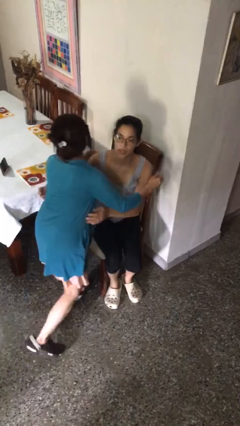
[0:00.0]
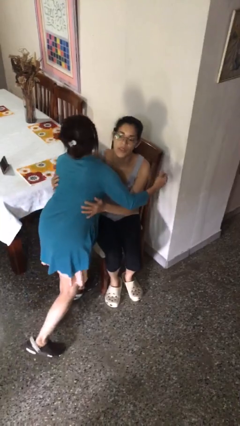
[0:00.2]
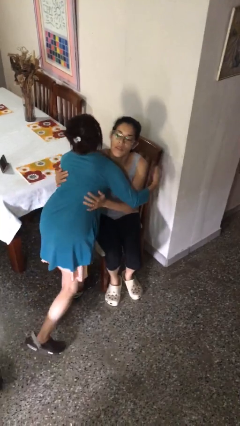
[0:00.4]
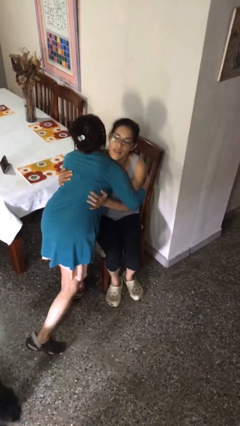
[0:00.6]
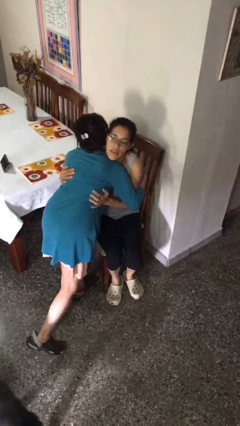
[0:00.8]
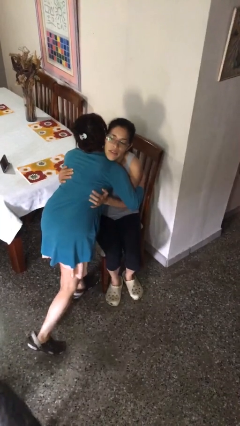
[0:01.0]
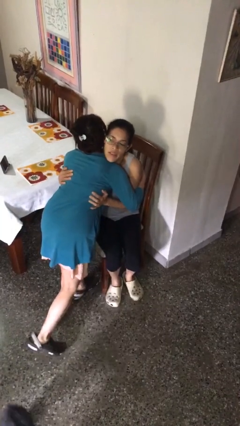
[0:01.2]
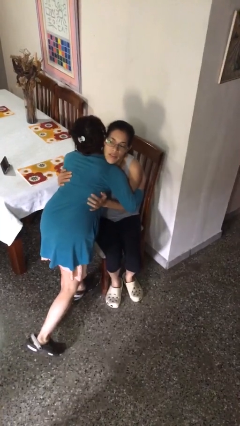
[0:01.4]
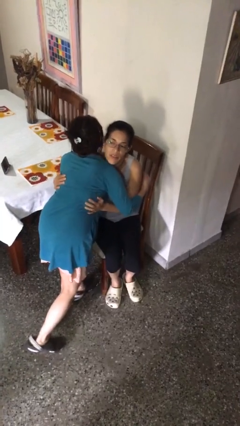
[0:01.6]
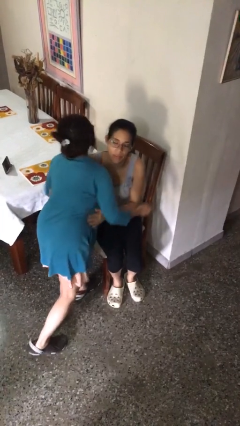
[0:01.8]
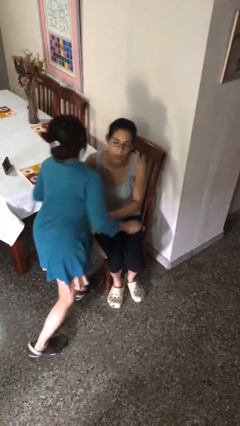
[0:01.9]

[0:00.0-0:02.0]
person embraces person

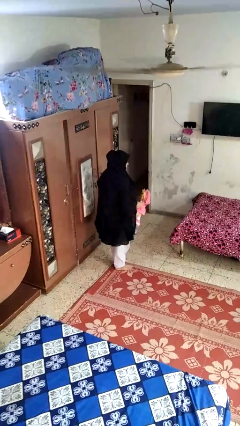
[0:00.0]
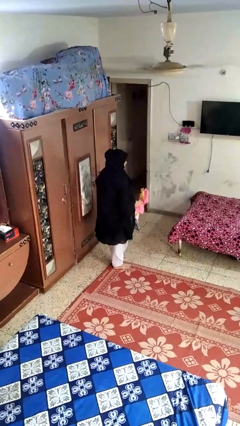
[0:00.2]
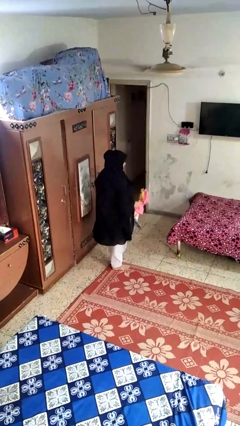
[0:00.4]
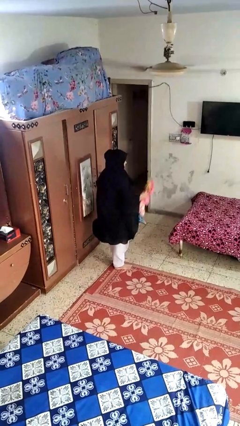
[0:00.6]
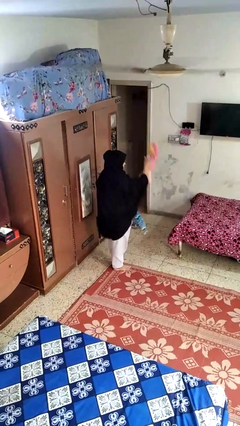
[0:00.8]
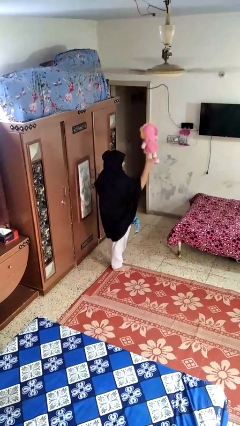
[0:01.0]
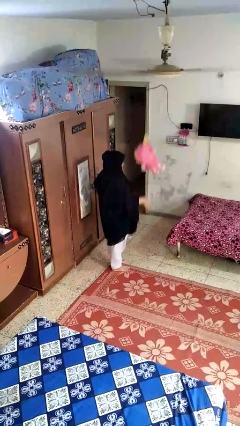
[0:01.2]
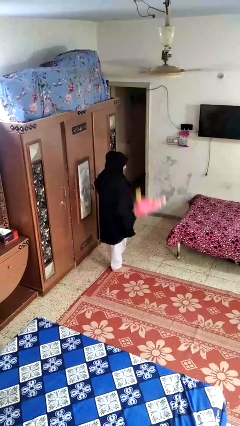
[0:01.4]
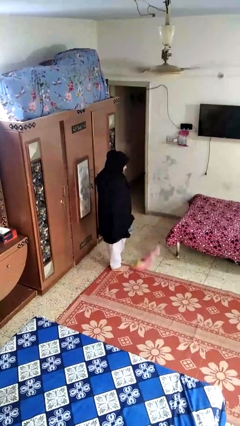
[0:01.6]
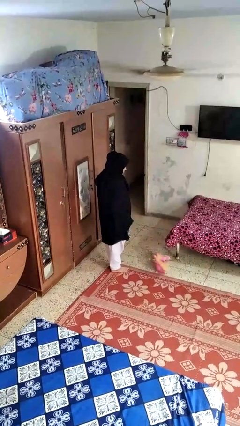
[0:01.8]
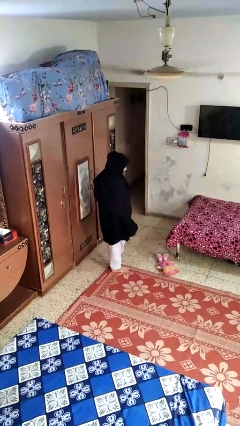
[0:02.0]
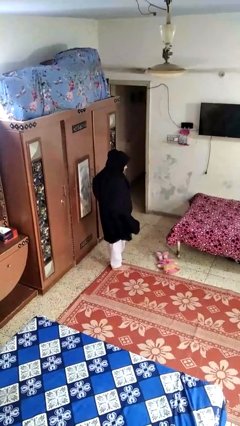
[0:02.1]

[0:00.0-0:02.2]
person throws object into air

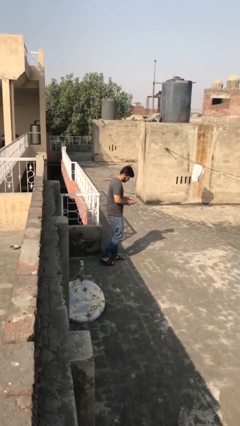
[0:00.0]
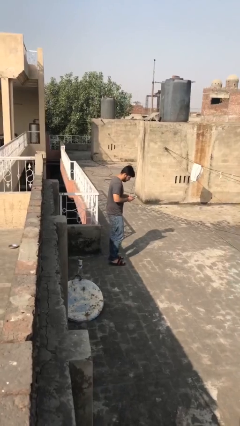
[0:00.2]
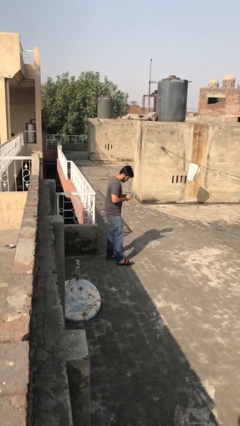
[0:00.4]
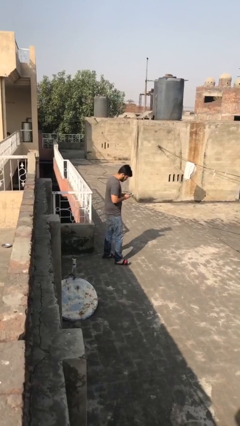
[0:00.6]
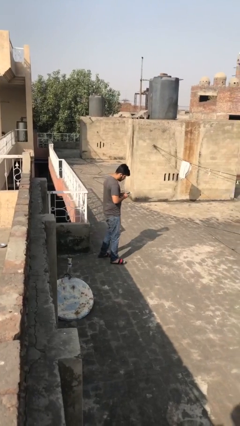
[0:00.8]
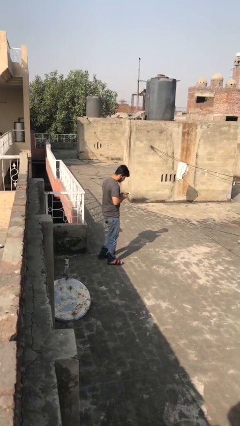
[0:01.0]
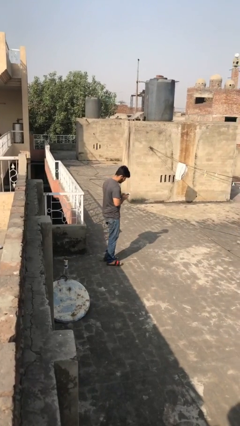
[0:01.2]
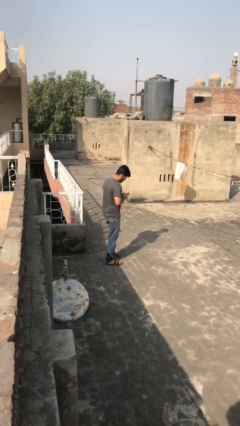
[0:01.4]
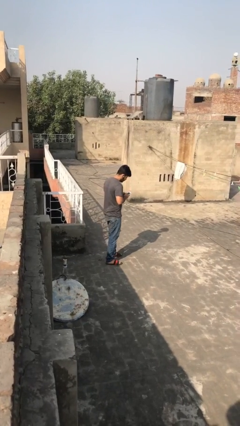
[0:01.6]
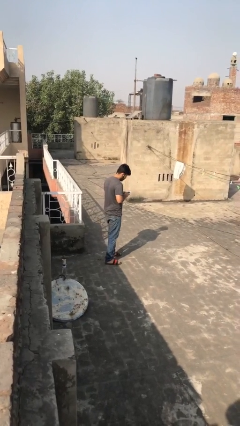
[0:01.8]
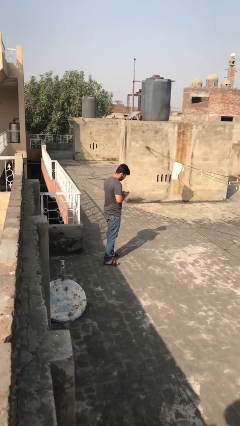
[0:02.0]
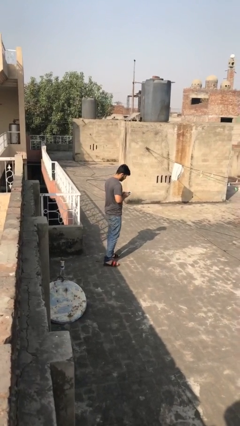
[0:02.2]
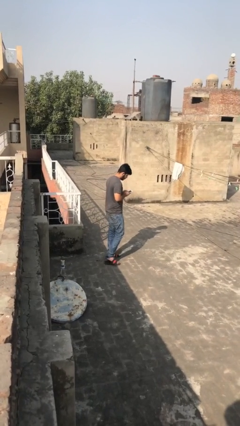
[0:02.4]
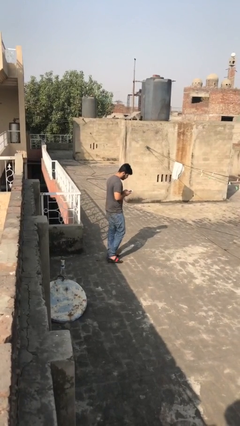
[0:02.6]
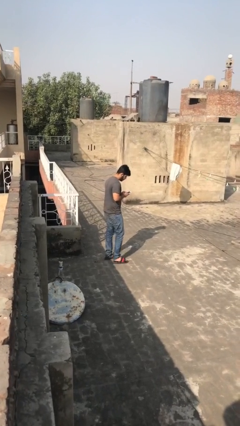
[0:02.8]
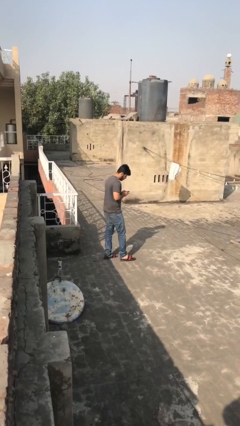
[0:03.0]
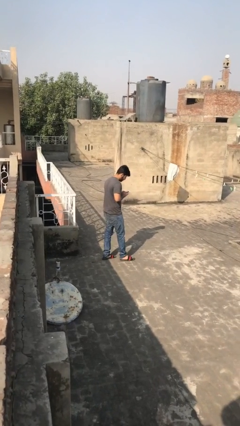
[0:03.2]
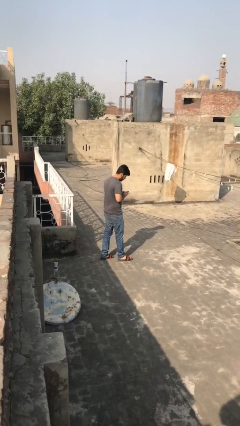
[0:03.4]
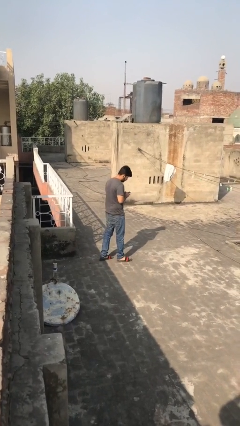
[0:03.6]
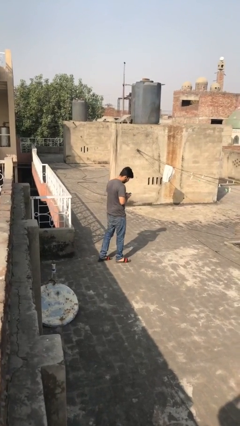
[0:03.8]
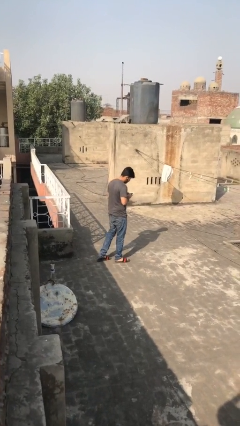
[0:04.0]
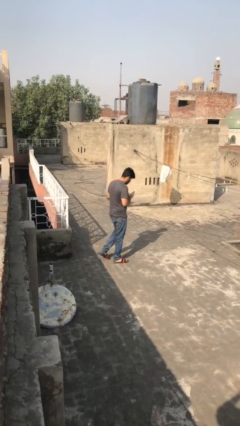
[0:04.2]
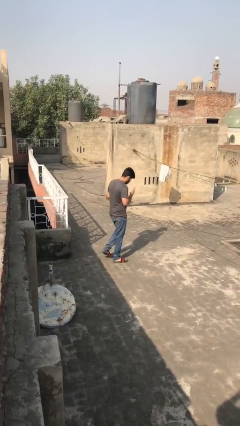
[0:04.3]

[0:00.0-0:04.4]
person texts on phone

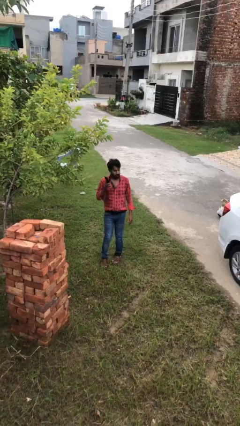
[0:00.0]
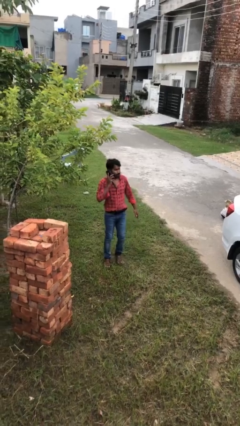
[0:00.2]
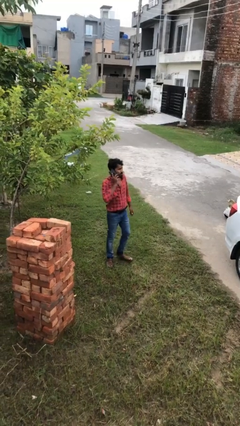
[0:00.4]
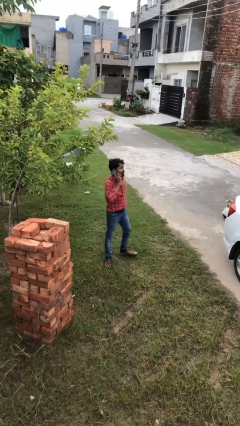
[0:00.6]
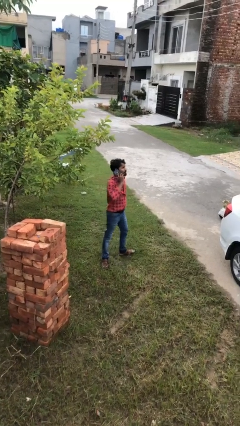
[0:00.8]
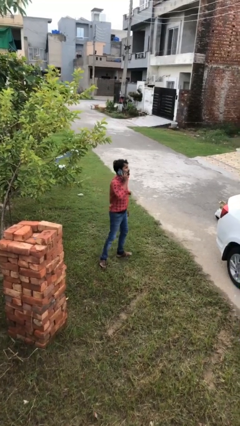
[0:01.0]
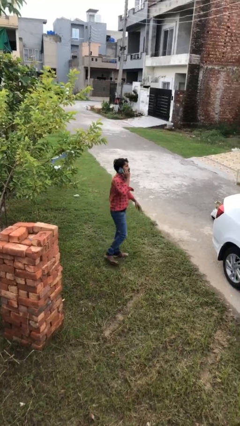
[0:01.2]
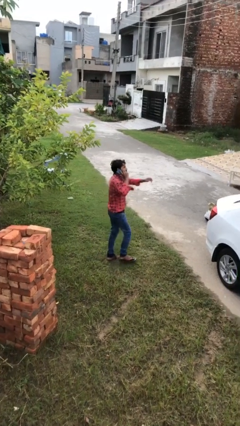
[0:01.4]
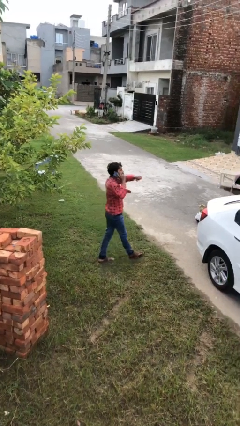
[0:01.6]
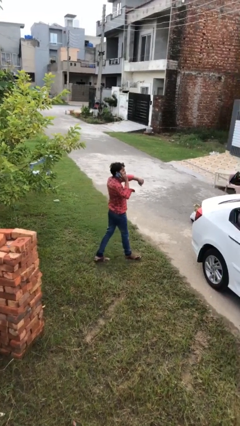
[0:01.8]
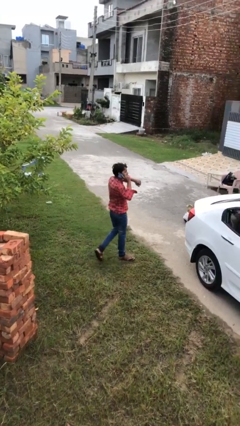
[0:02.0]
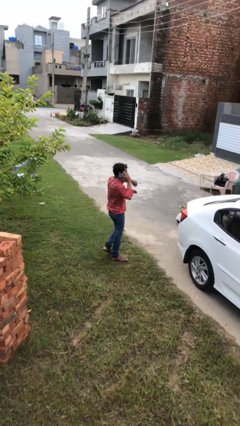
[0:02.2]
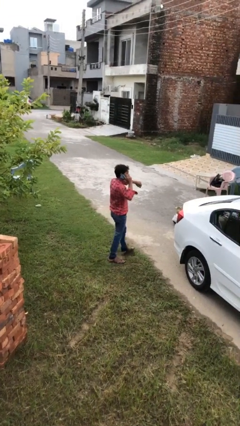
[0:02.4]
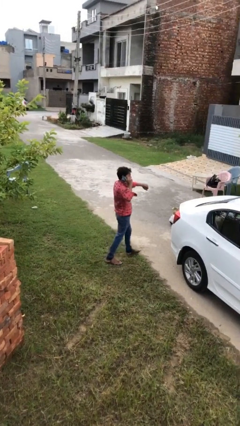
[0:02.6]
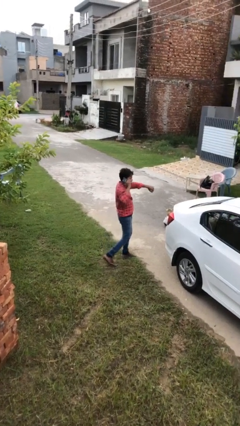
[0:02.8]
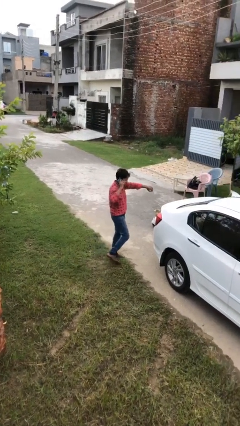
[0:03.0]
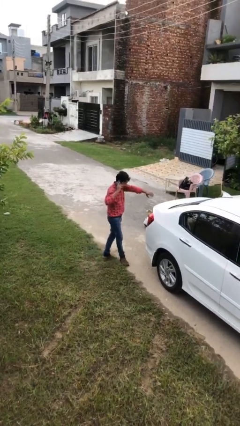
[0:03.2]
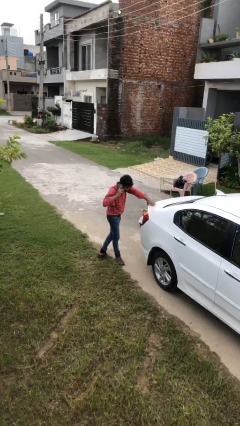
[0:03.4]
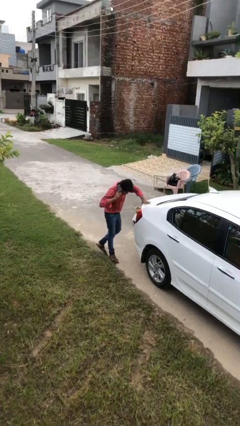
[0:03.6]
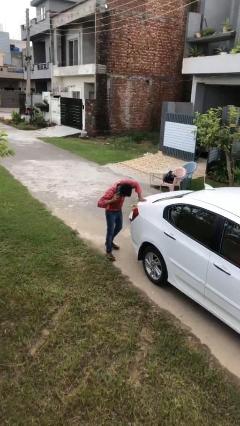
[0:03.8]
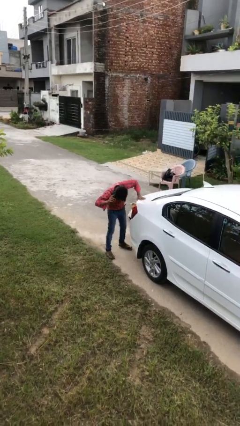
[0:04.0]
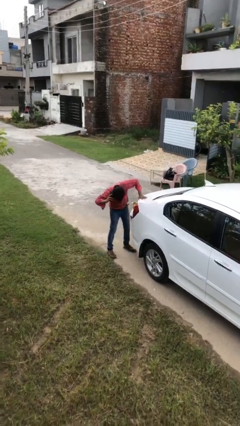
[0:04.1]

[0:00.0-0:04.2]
person talks on phone

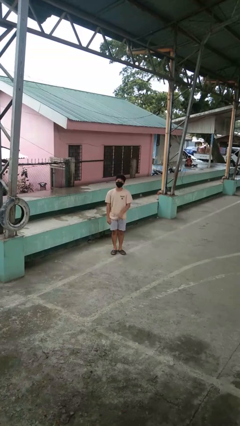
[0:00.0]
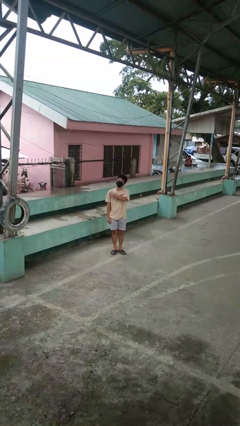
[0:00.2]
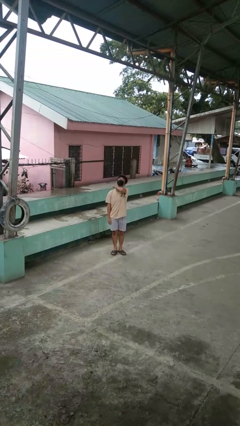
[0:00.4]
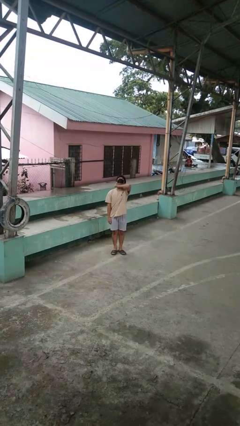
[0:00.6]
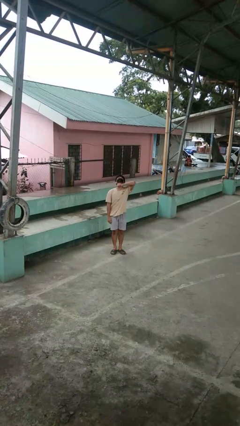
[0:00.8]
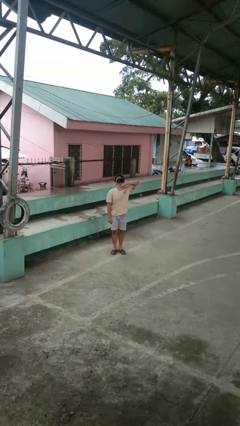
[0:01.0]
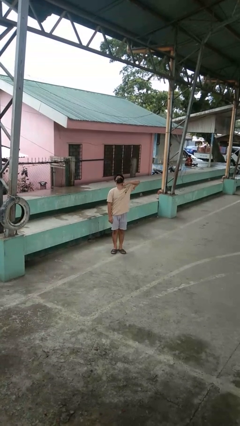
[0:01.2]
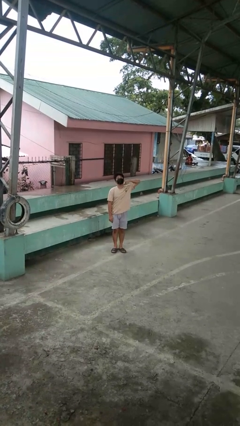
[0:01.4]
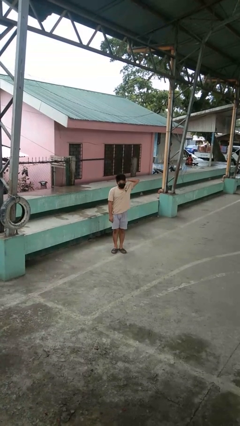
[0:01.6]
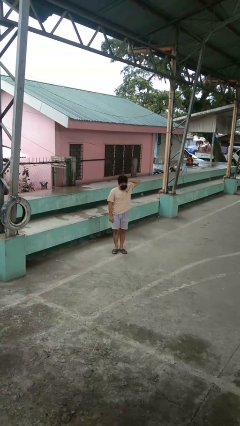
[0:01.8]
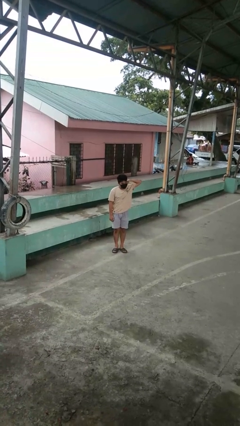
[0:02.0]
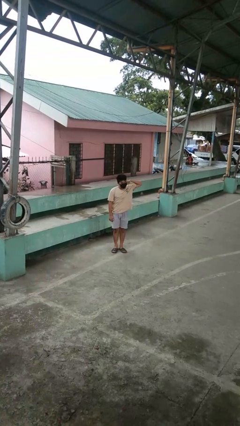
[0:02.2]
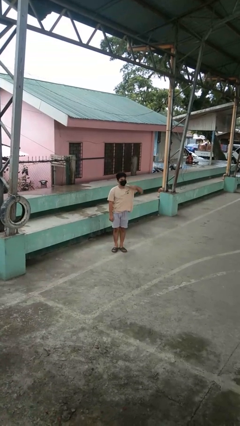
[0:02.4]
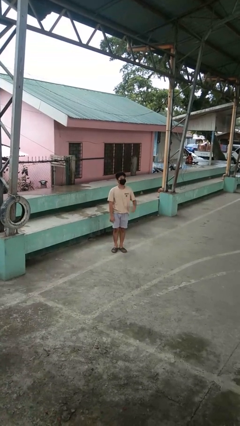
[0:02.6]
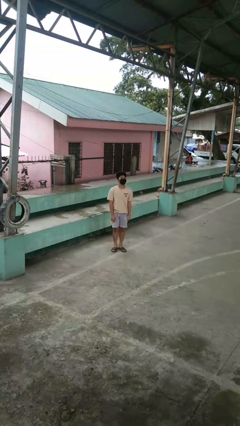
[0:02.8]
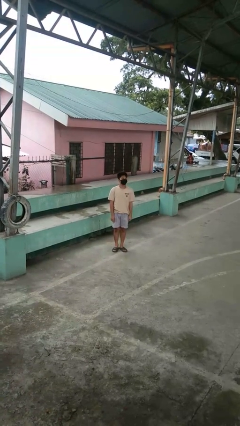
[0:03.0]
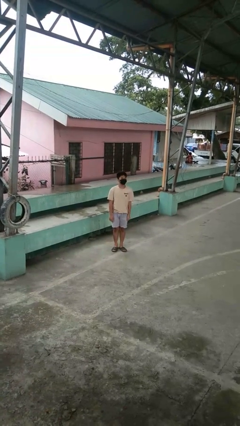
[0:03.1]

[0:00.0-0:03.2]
person gestures cut

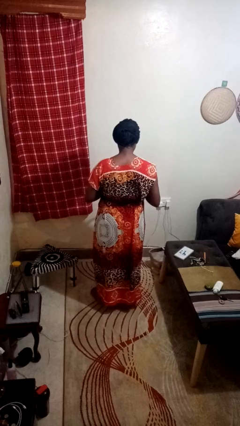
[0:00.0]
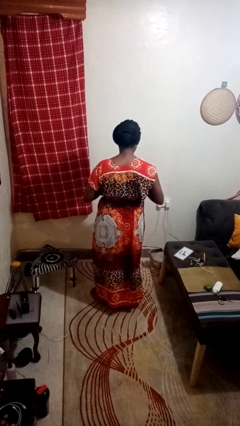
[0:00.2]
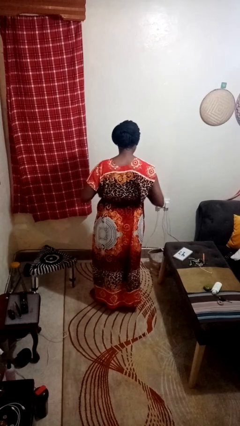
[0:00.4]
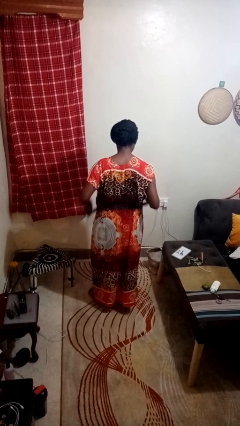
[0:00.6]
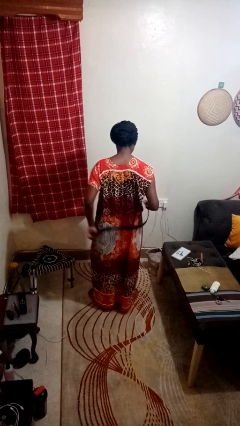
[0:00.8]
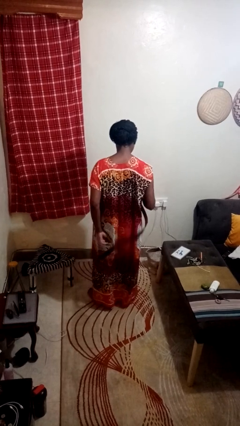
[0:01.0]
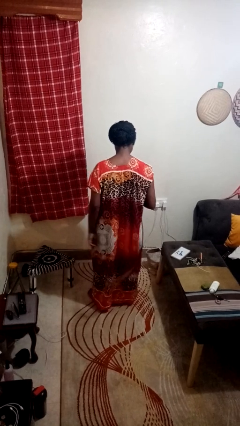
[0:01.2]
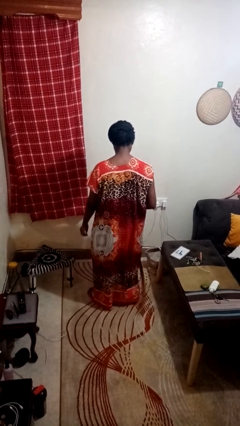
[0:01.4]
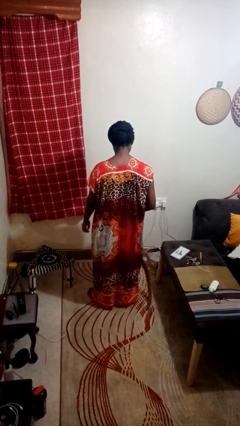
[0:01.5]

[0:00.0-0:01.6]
person takes off belt
